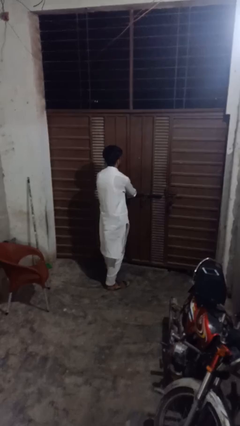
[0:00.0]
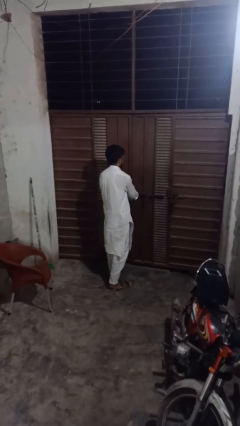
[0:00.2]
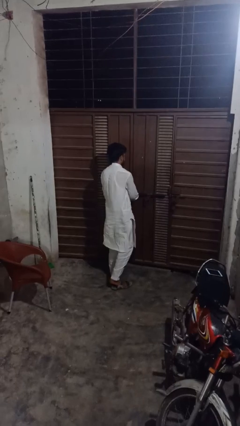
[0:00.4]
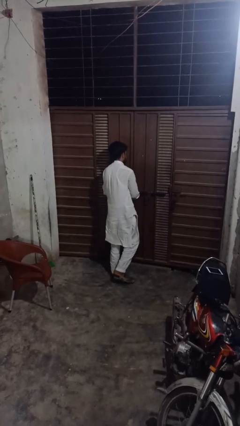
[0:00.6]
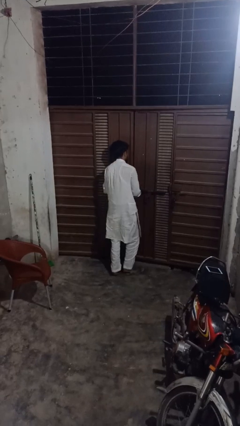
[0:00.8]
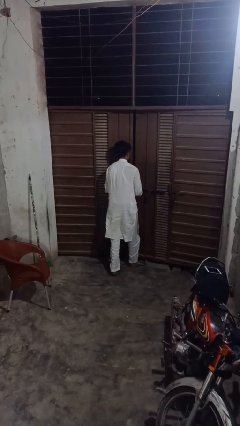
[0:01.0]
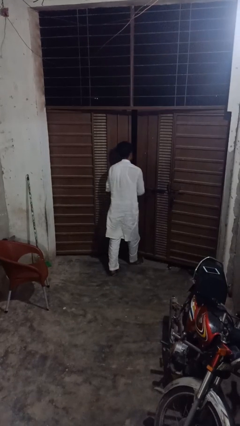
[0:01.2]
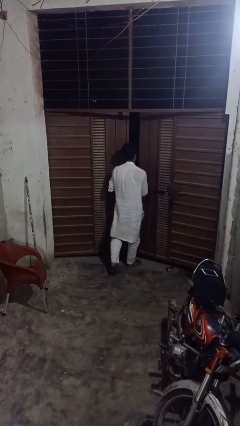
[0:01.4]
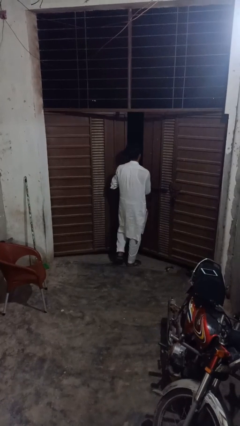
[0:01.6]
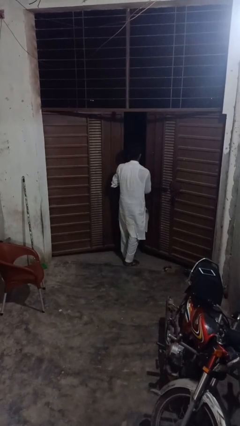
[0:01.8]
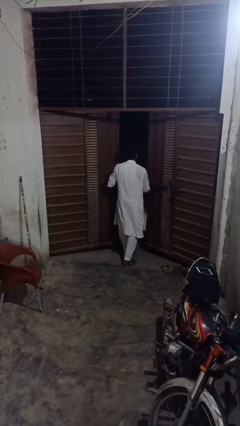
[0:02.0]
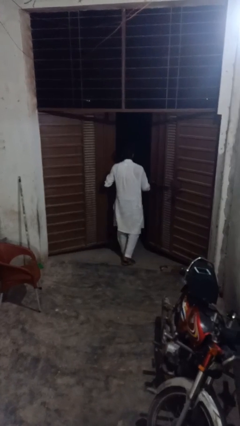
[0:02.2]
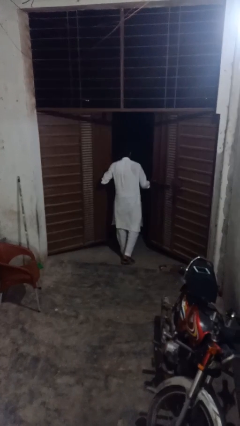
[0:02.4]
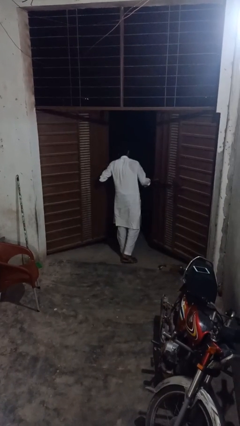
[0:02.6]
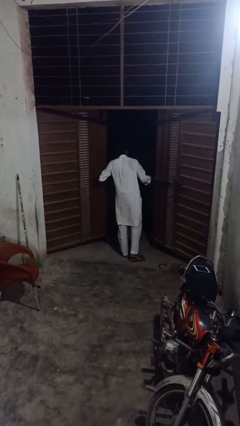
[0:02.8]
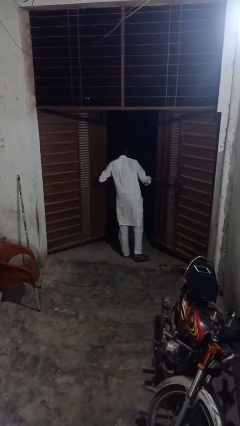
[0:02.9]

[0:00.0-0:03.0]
person opens gate

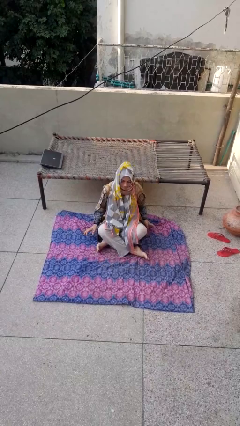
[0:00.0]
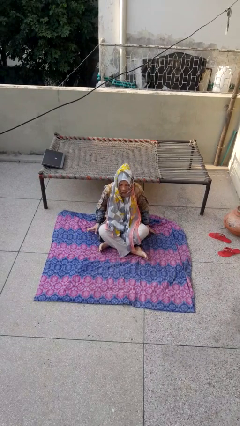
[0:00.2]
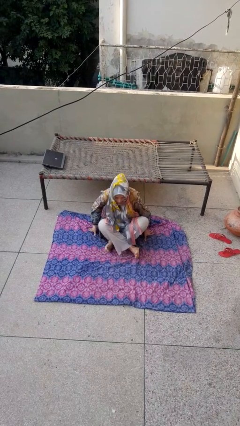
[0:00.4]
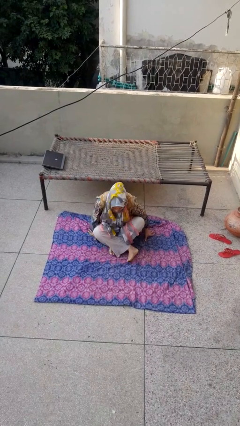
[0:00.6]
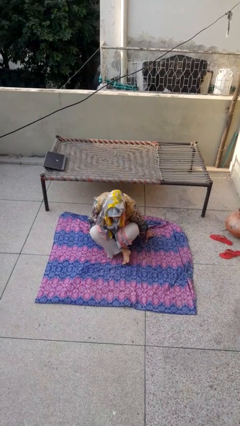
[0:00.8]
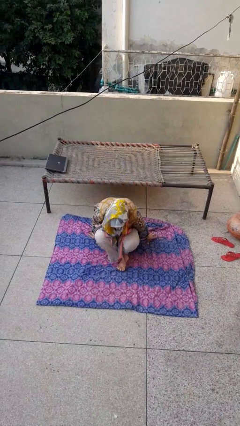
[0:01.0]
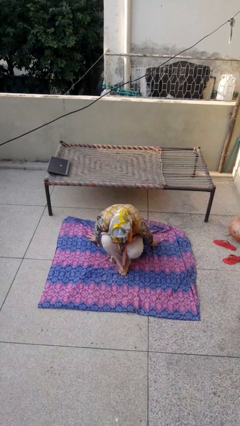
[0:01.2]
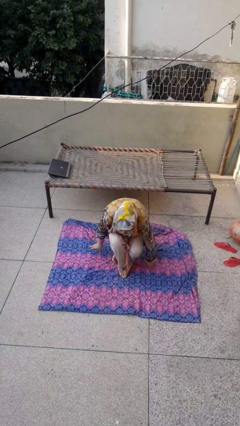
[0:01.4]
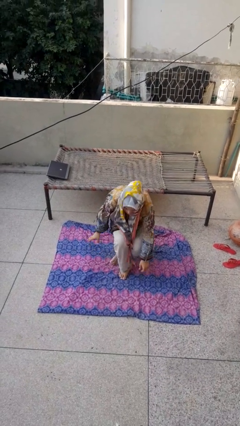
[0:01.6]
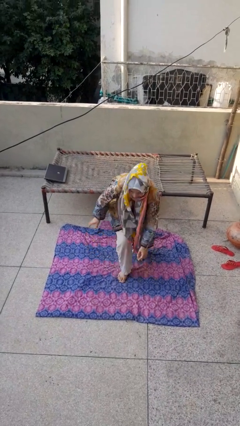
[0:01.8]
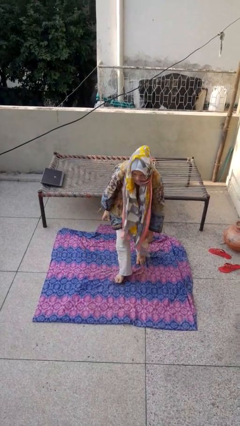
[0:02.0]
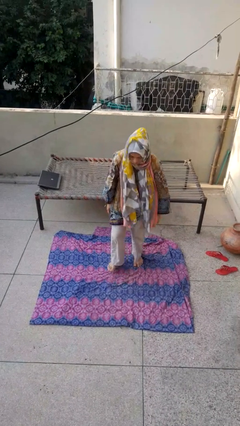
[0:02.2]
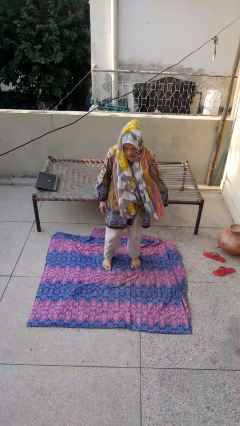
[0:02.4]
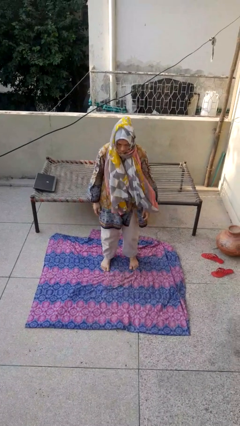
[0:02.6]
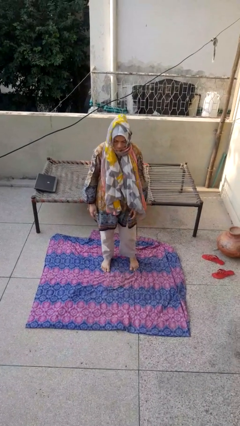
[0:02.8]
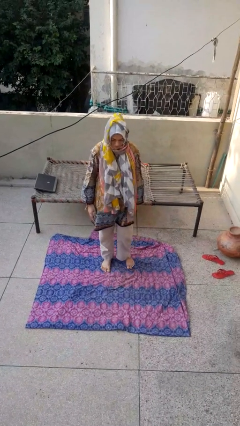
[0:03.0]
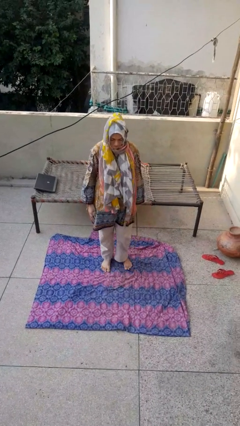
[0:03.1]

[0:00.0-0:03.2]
person stands up from floor

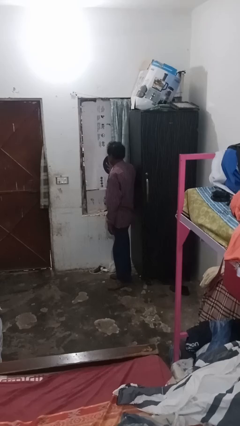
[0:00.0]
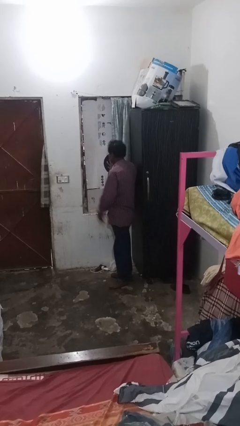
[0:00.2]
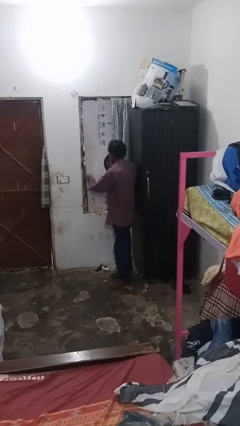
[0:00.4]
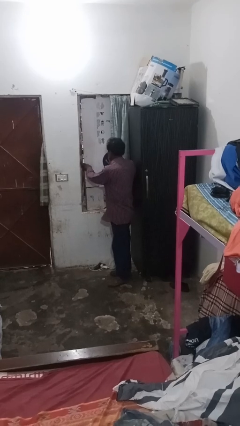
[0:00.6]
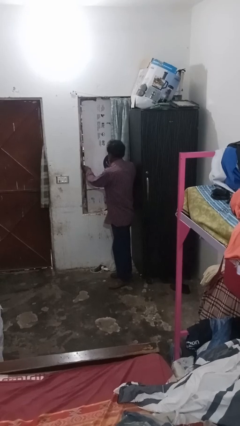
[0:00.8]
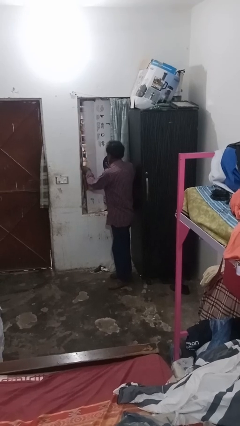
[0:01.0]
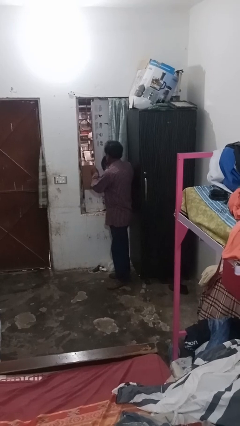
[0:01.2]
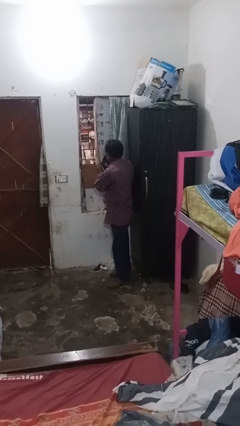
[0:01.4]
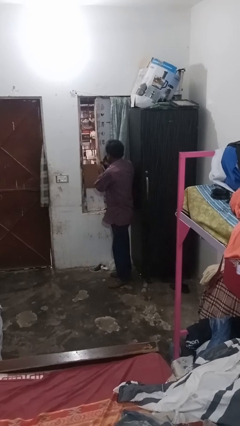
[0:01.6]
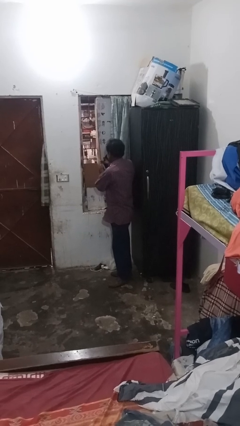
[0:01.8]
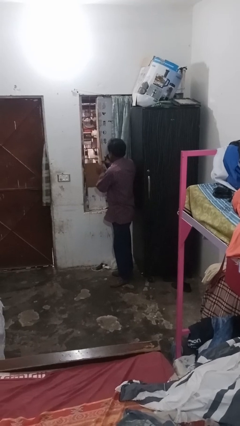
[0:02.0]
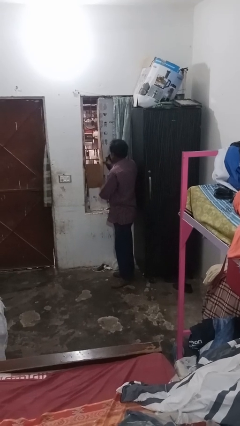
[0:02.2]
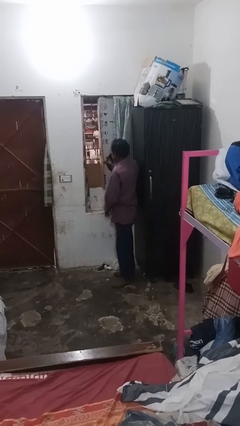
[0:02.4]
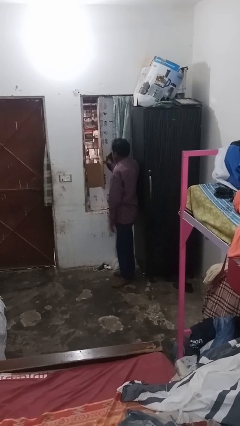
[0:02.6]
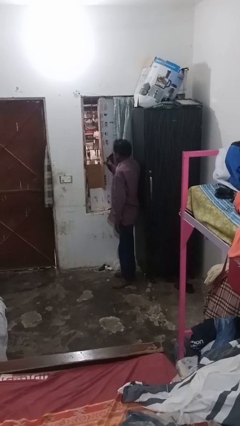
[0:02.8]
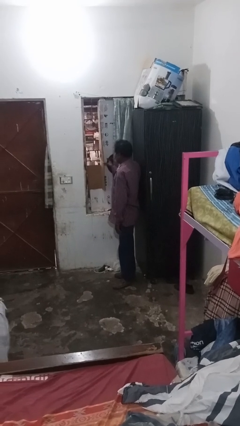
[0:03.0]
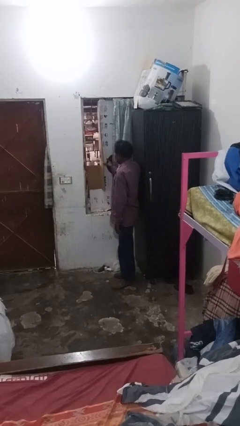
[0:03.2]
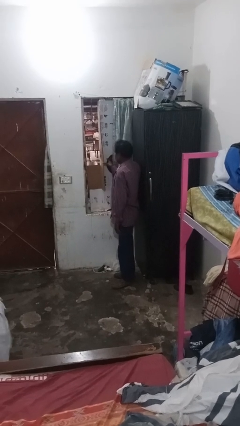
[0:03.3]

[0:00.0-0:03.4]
person opens home window

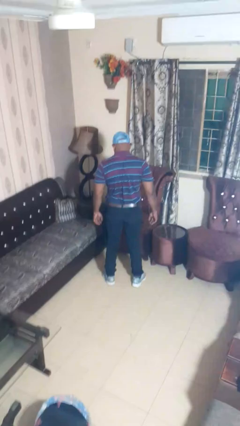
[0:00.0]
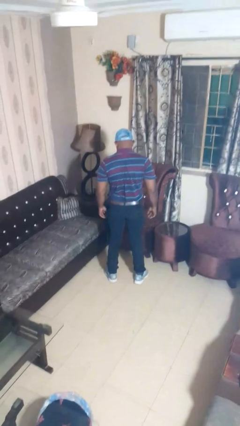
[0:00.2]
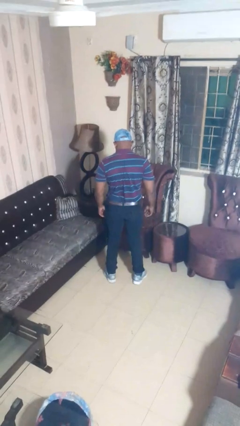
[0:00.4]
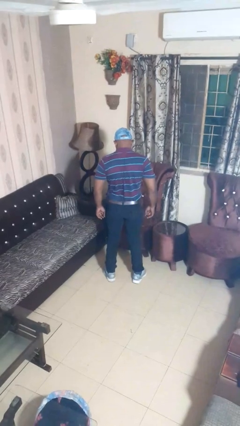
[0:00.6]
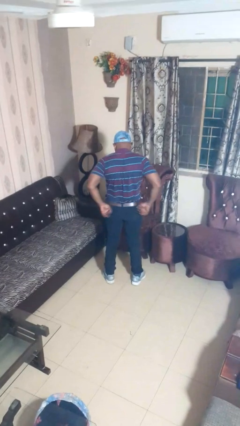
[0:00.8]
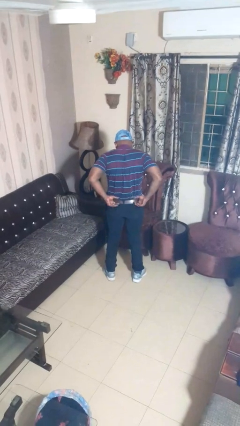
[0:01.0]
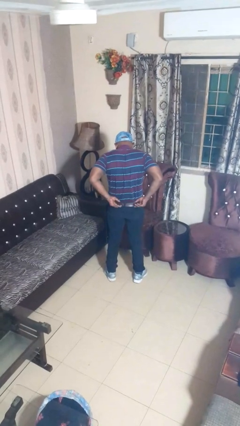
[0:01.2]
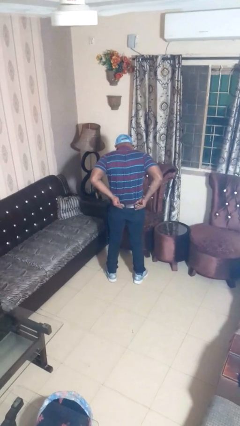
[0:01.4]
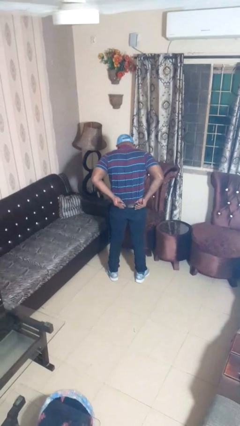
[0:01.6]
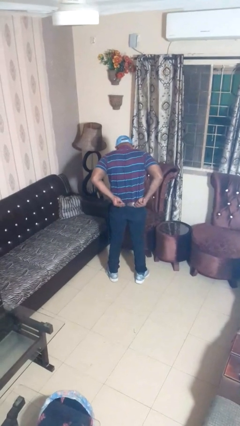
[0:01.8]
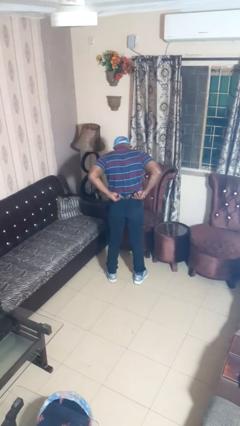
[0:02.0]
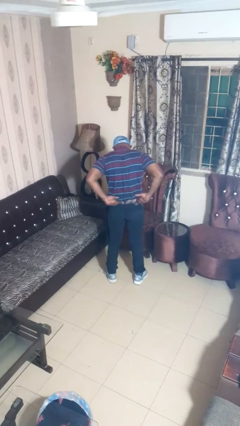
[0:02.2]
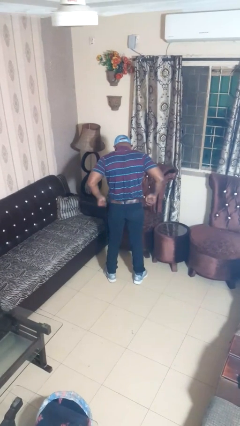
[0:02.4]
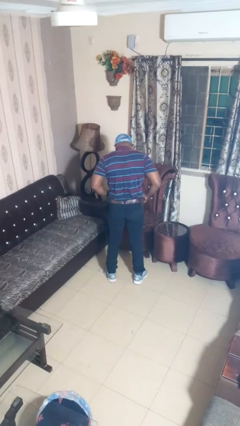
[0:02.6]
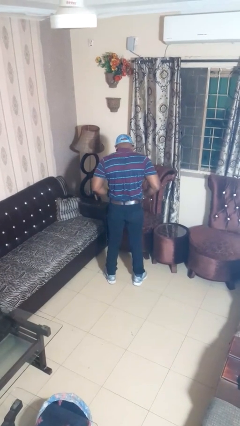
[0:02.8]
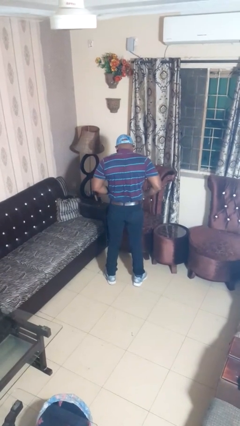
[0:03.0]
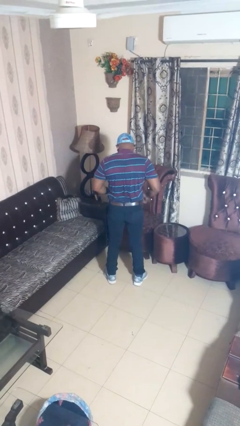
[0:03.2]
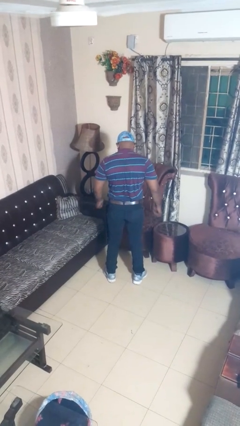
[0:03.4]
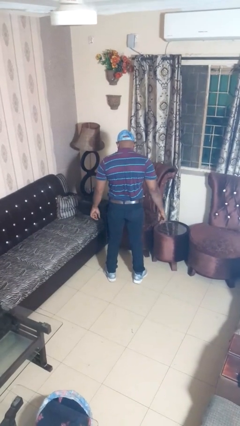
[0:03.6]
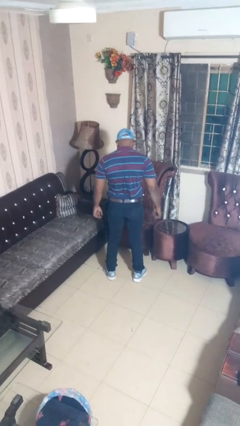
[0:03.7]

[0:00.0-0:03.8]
person hikes up pants

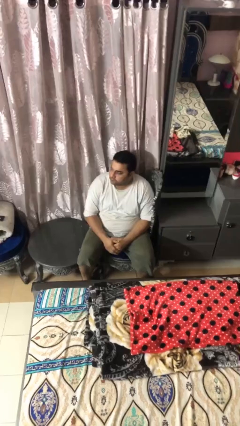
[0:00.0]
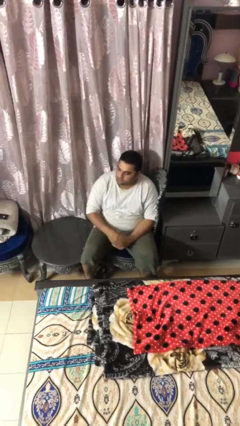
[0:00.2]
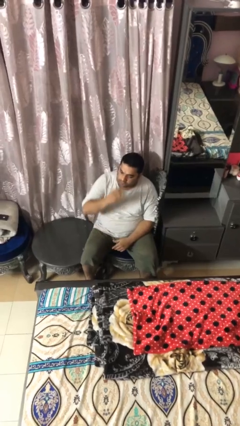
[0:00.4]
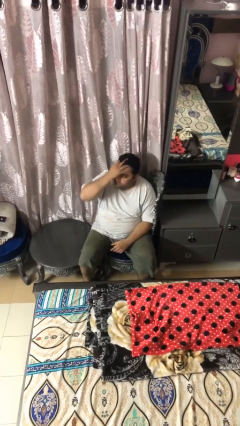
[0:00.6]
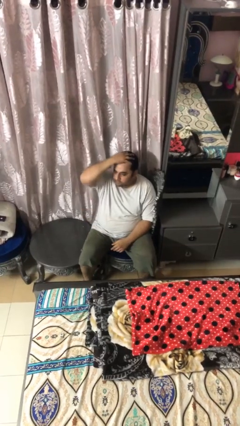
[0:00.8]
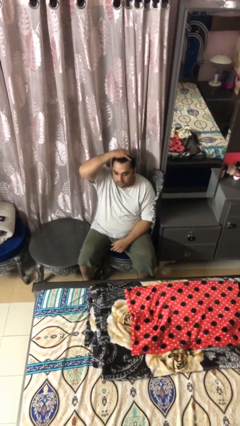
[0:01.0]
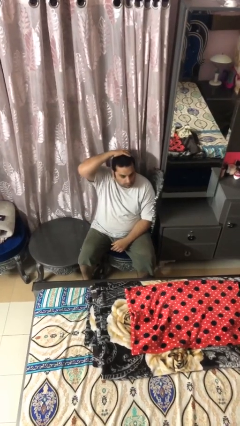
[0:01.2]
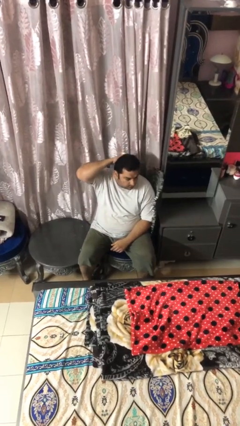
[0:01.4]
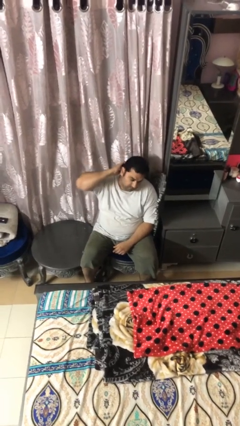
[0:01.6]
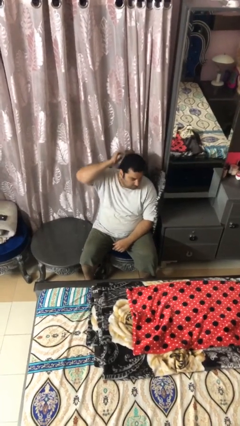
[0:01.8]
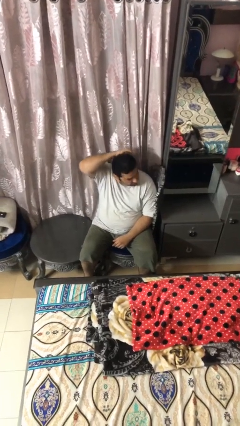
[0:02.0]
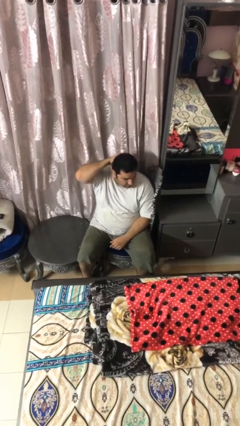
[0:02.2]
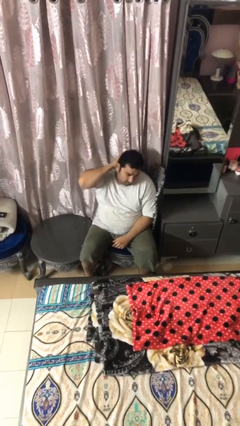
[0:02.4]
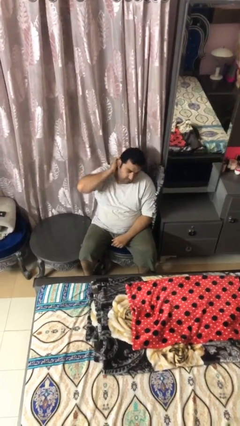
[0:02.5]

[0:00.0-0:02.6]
person strokes hair

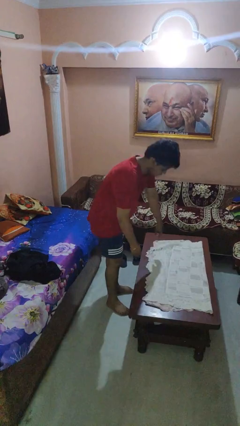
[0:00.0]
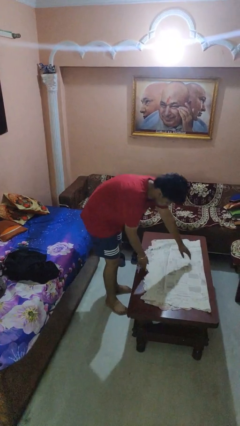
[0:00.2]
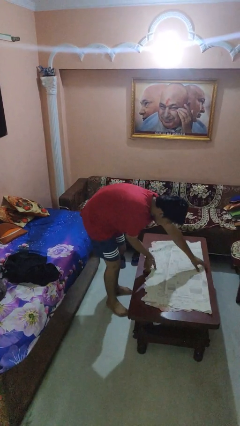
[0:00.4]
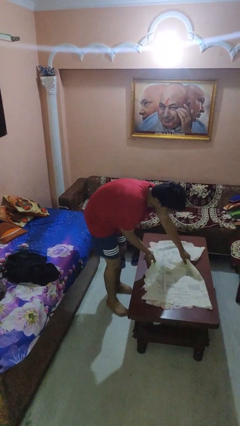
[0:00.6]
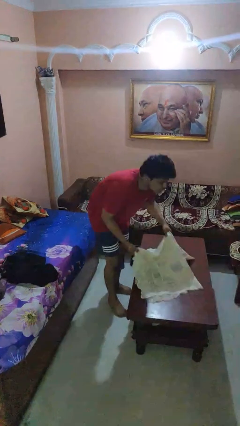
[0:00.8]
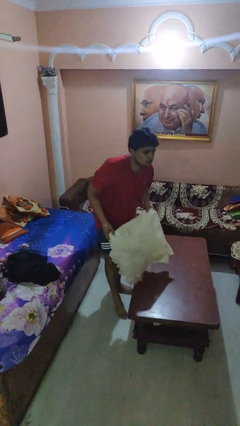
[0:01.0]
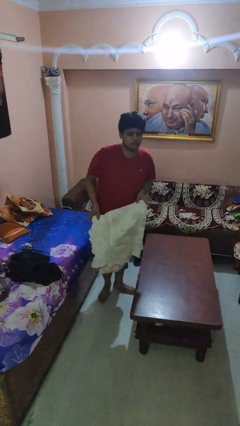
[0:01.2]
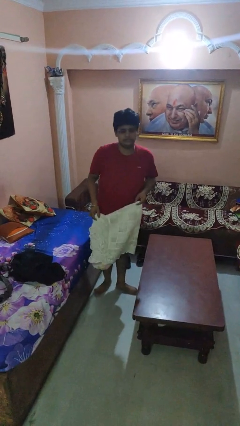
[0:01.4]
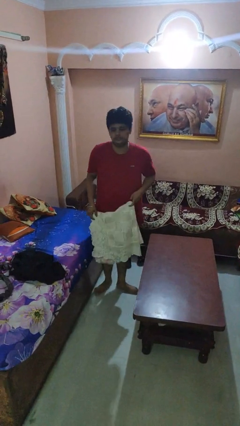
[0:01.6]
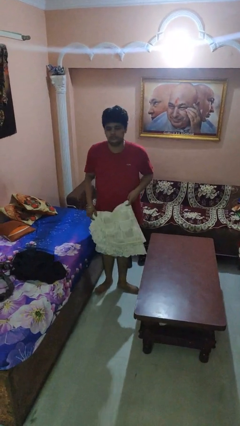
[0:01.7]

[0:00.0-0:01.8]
person folds tablecloth
